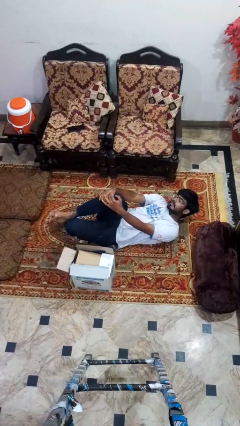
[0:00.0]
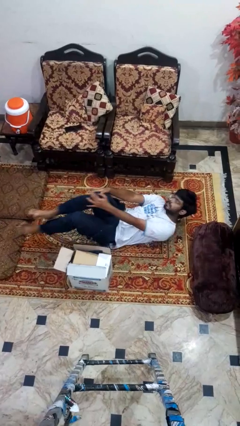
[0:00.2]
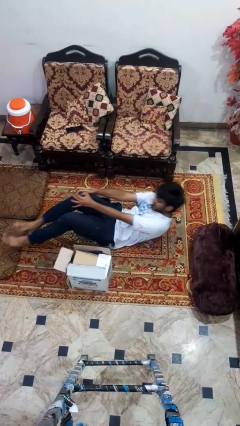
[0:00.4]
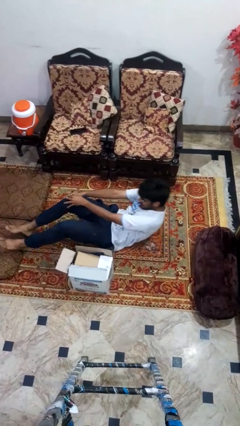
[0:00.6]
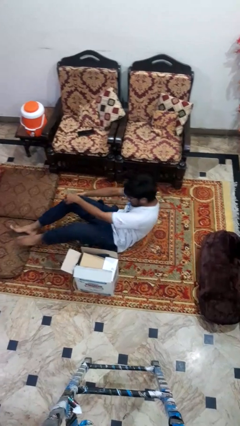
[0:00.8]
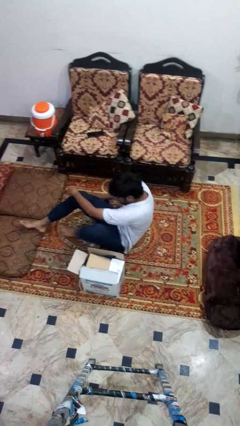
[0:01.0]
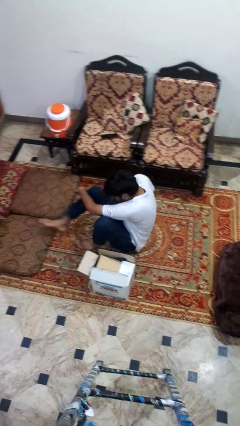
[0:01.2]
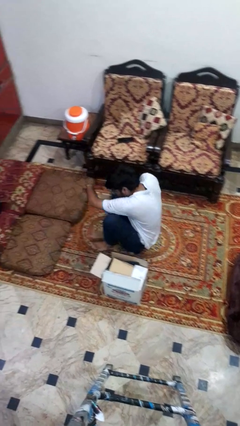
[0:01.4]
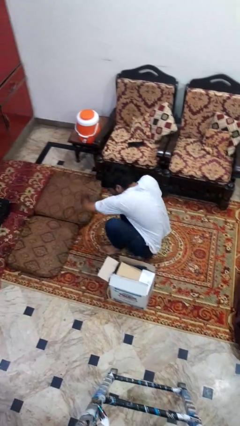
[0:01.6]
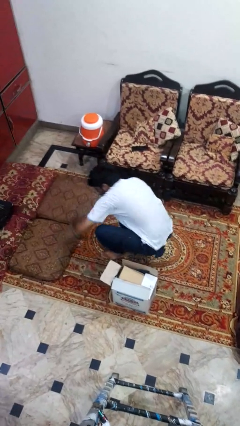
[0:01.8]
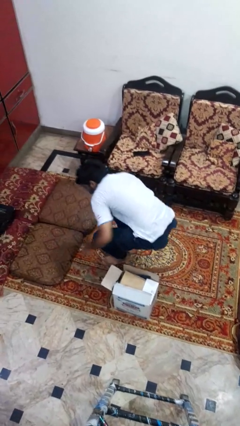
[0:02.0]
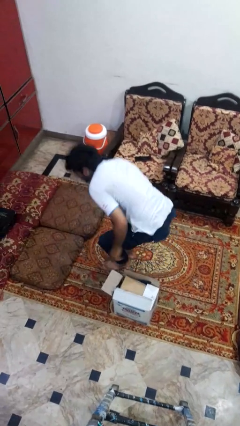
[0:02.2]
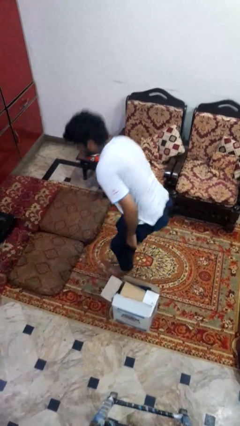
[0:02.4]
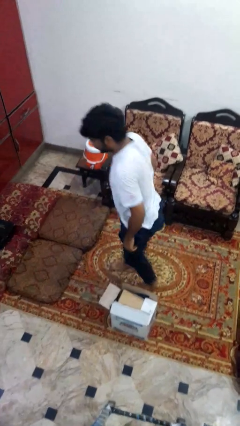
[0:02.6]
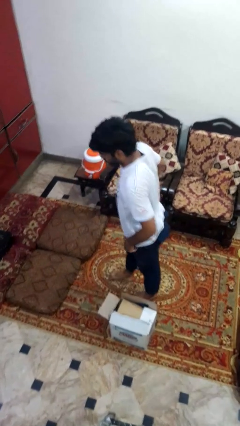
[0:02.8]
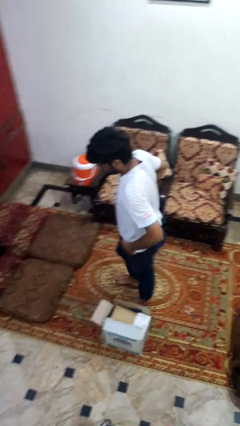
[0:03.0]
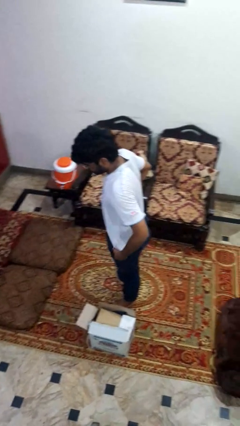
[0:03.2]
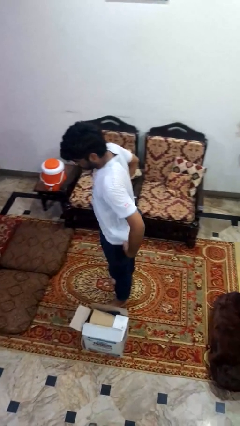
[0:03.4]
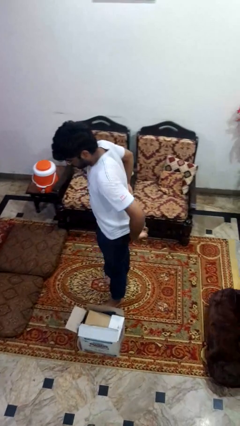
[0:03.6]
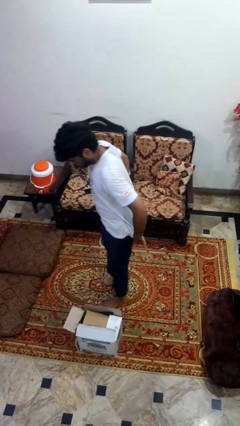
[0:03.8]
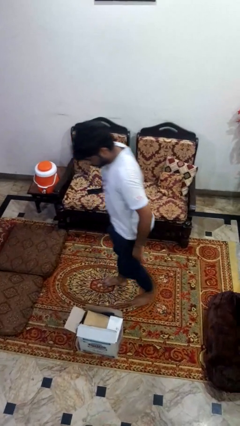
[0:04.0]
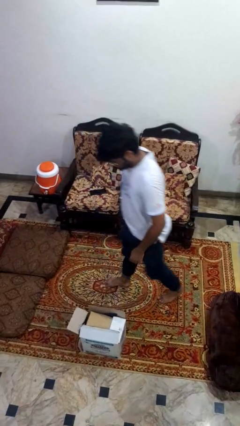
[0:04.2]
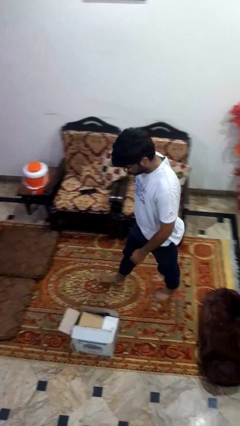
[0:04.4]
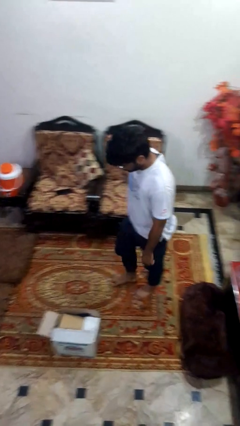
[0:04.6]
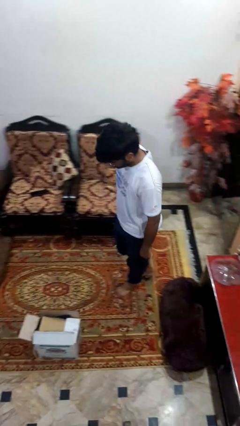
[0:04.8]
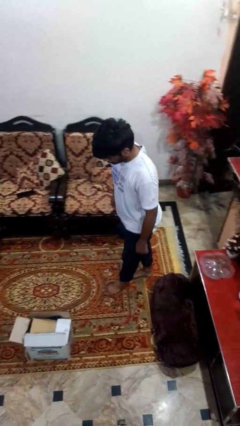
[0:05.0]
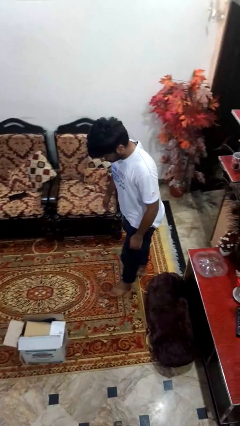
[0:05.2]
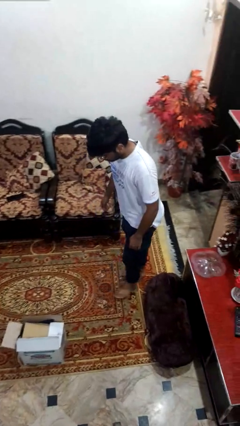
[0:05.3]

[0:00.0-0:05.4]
person stands up from floor

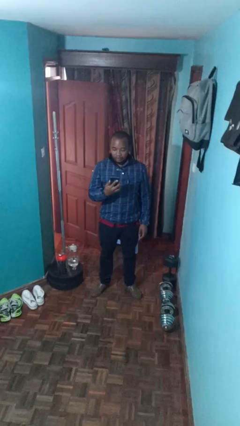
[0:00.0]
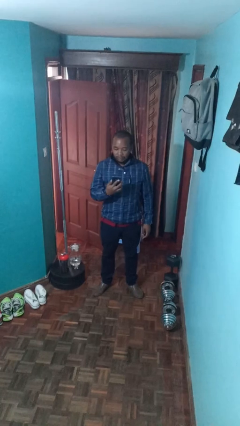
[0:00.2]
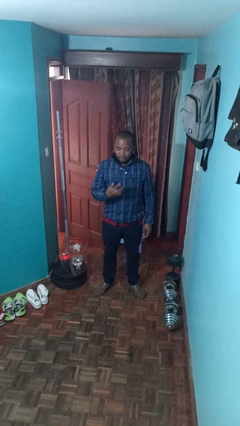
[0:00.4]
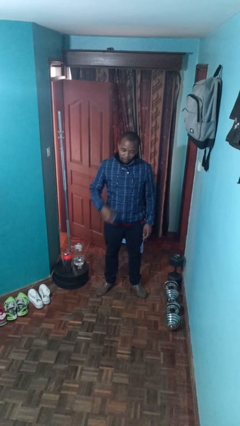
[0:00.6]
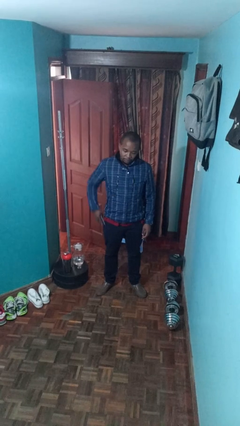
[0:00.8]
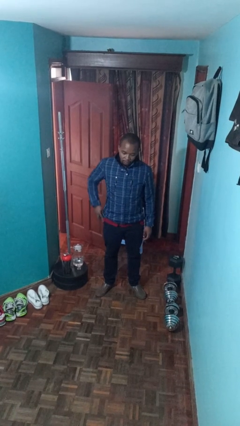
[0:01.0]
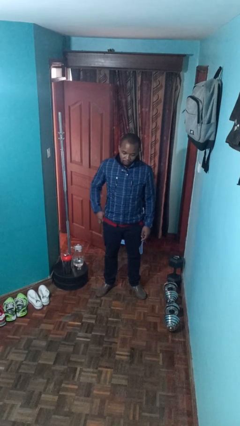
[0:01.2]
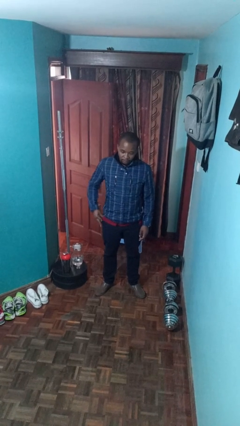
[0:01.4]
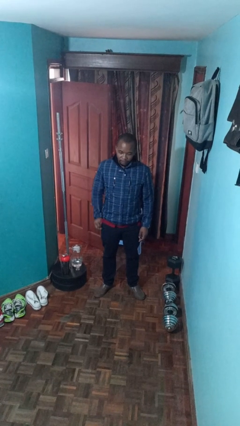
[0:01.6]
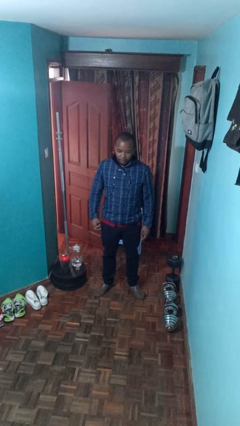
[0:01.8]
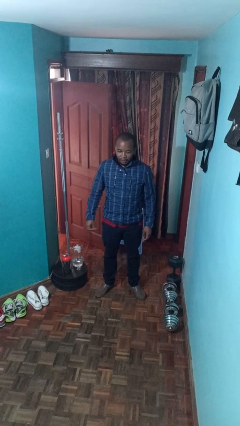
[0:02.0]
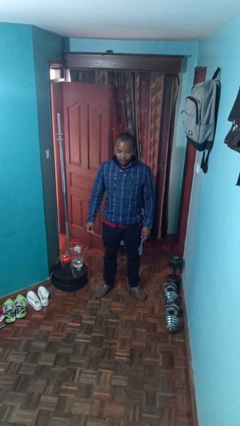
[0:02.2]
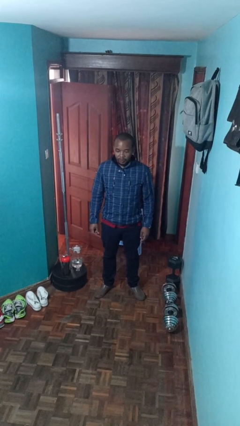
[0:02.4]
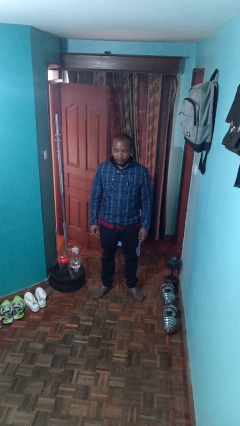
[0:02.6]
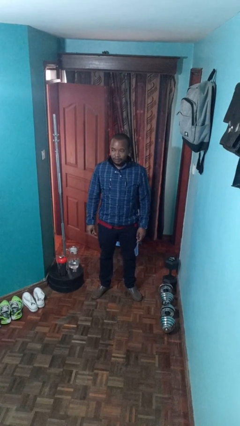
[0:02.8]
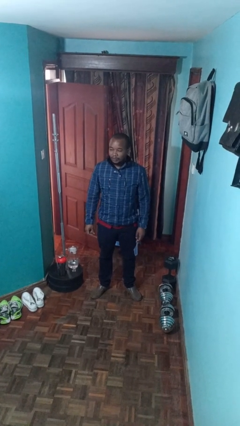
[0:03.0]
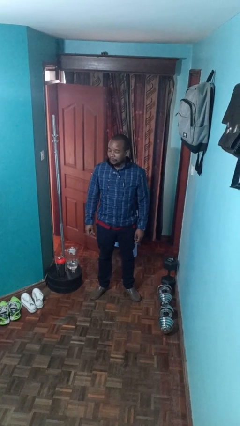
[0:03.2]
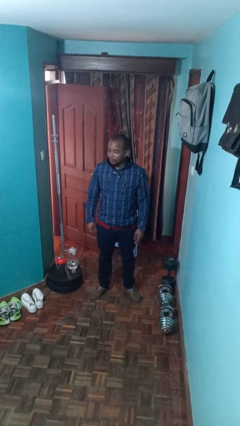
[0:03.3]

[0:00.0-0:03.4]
person puts phone into pocket

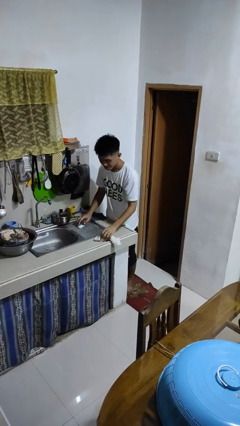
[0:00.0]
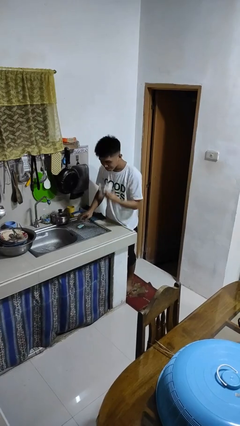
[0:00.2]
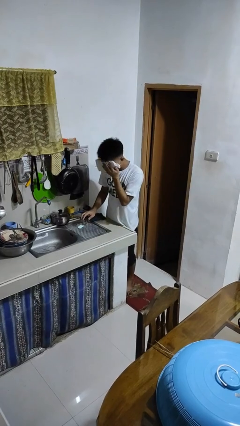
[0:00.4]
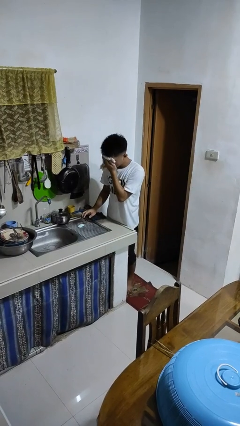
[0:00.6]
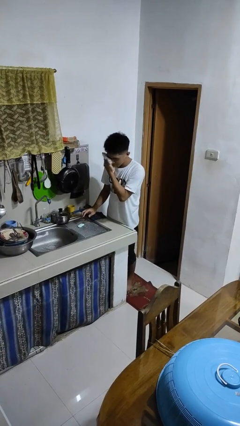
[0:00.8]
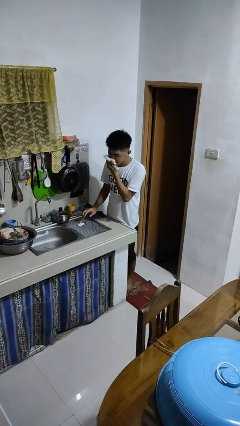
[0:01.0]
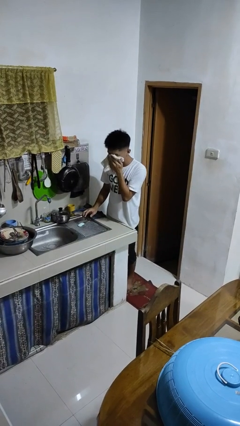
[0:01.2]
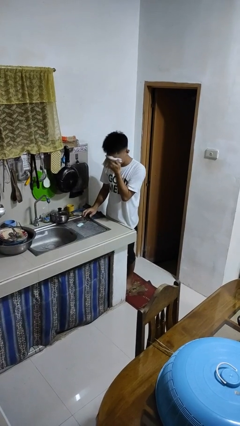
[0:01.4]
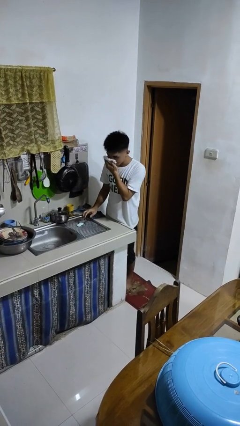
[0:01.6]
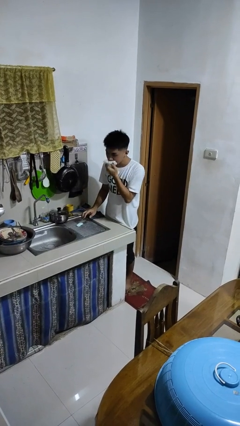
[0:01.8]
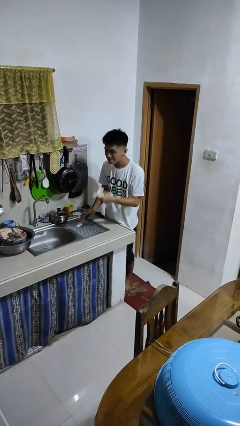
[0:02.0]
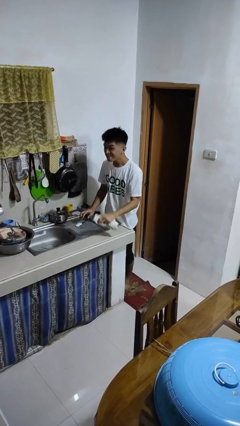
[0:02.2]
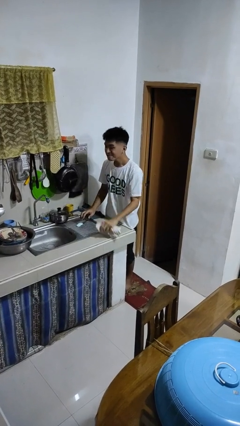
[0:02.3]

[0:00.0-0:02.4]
person dries face with towel

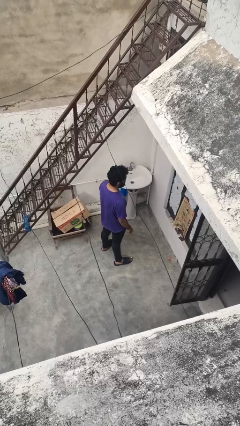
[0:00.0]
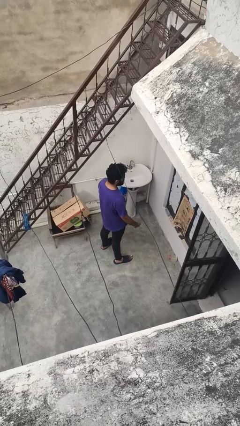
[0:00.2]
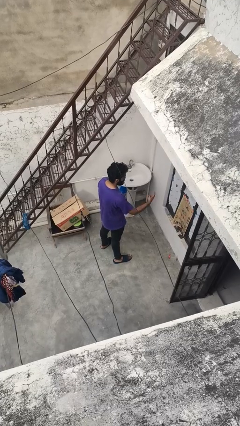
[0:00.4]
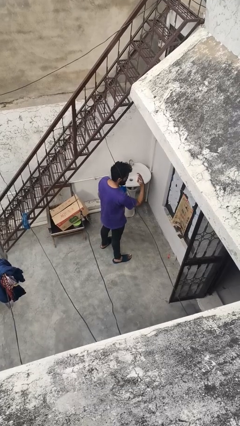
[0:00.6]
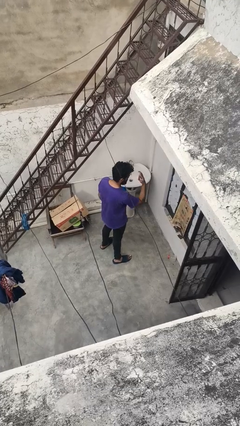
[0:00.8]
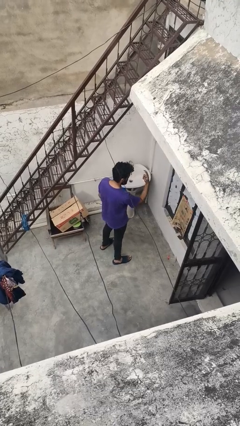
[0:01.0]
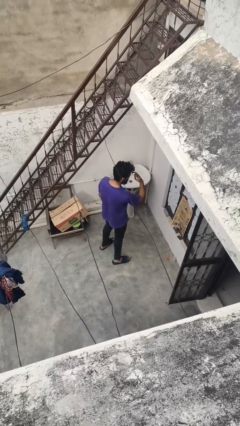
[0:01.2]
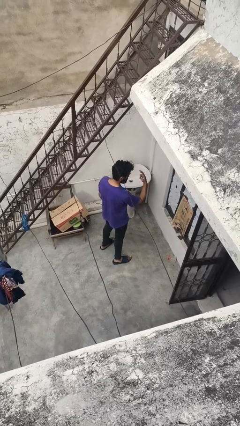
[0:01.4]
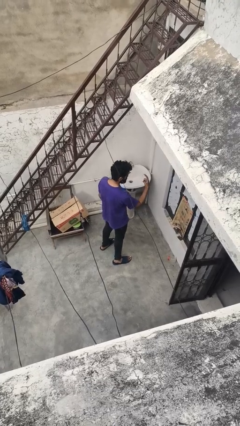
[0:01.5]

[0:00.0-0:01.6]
person gestures watch closely

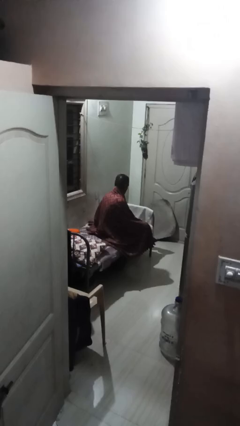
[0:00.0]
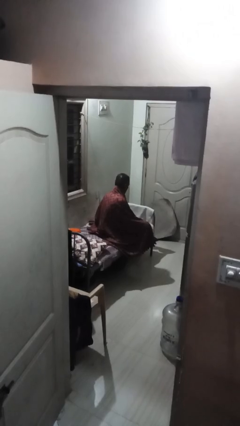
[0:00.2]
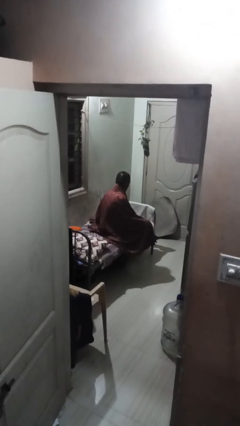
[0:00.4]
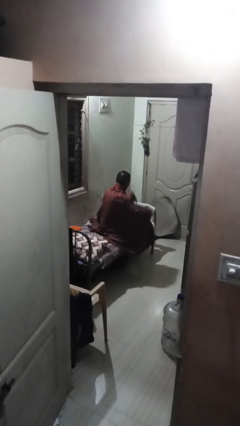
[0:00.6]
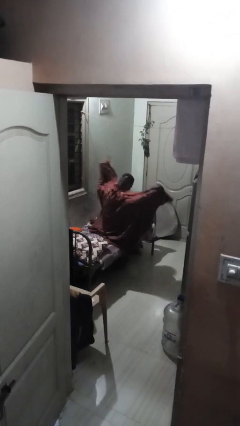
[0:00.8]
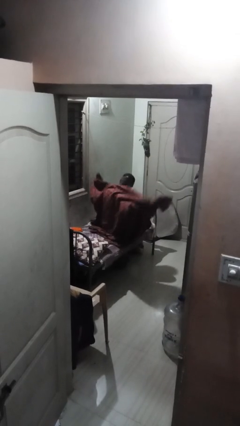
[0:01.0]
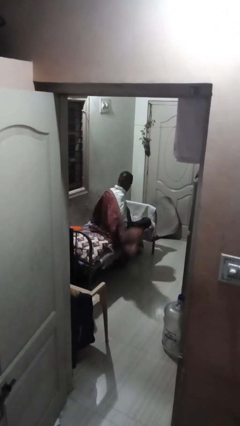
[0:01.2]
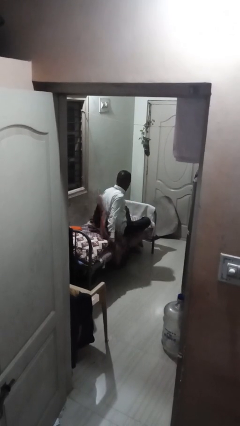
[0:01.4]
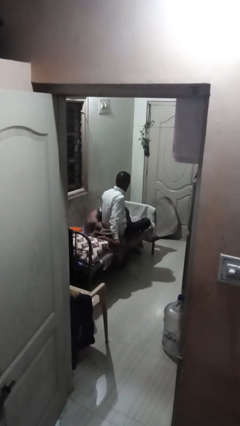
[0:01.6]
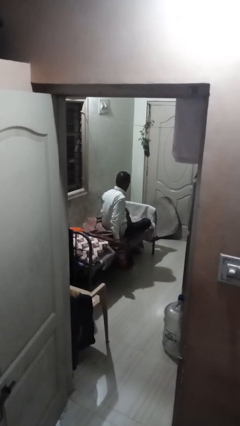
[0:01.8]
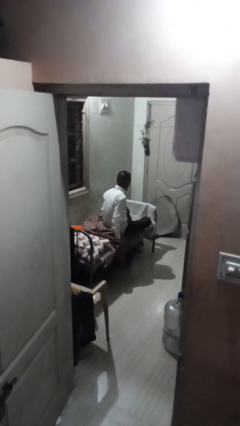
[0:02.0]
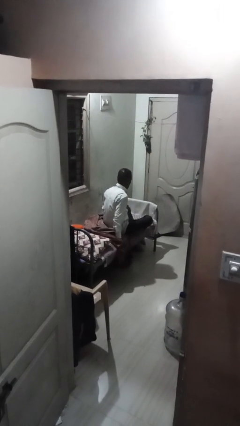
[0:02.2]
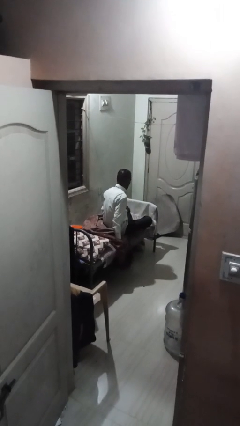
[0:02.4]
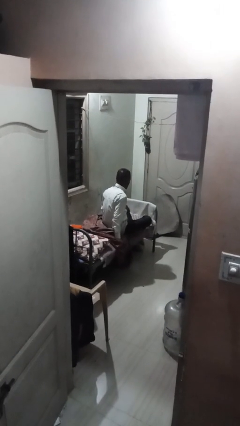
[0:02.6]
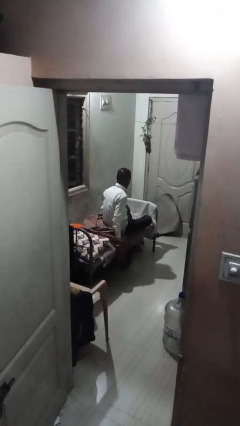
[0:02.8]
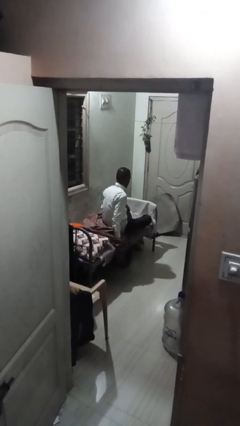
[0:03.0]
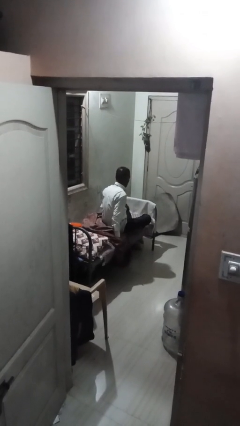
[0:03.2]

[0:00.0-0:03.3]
person uncovers with blanket

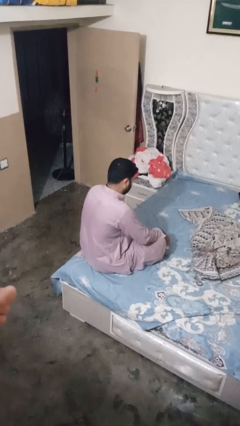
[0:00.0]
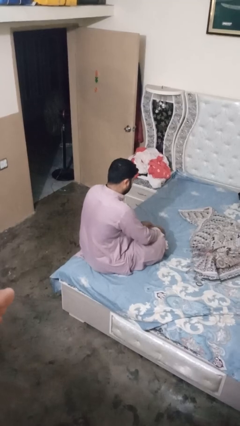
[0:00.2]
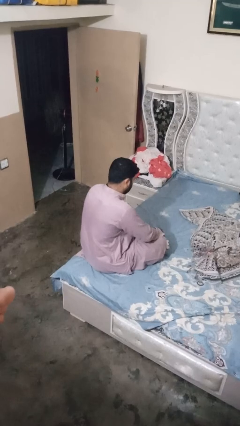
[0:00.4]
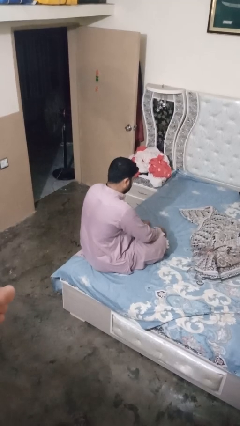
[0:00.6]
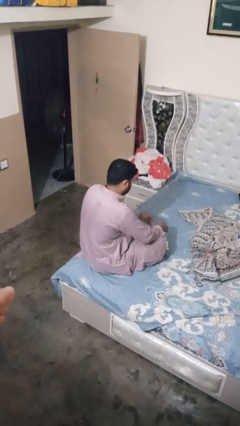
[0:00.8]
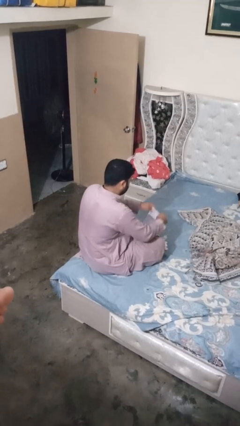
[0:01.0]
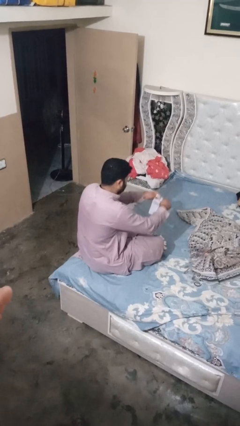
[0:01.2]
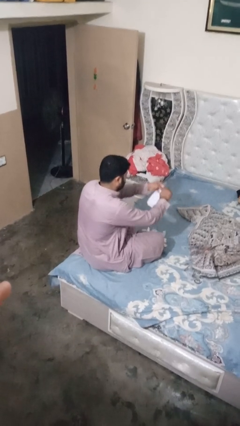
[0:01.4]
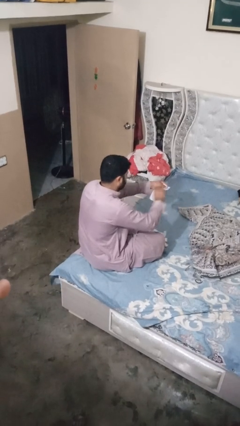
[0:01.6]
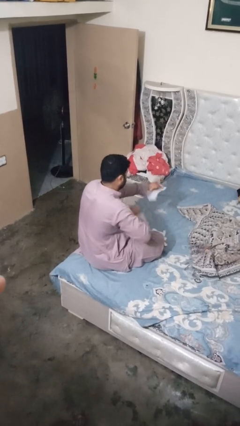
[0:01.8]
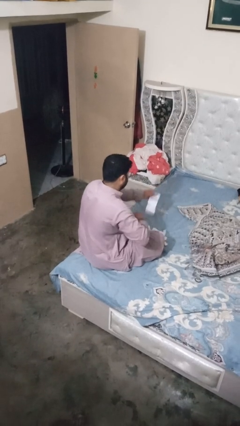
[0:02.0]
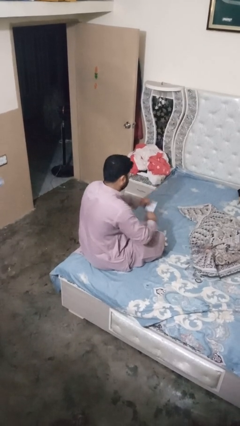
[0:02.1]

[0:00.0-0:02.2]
person tears paper
